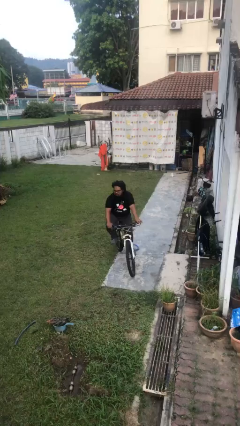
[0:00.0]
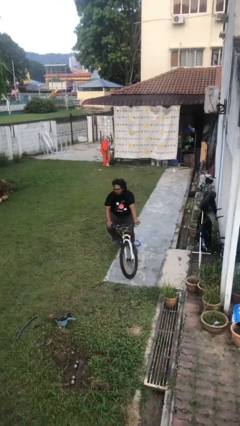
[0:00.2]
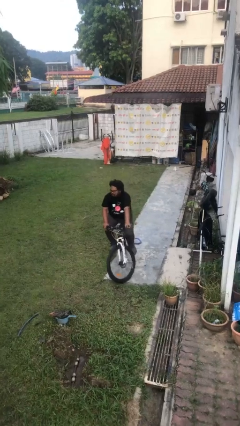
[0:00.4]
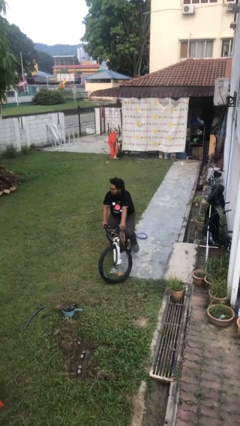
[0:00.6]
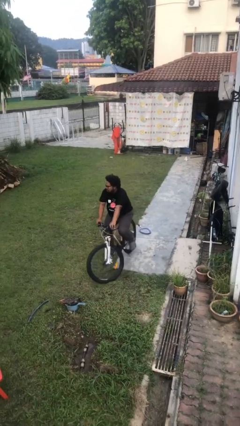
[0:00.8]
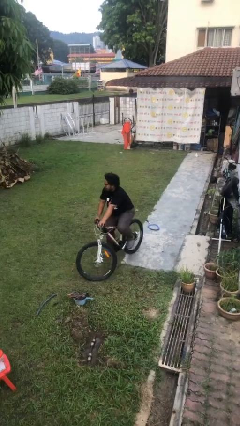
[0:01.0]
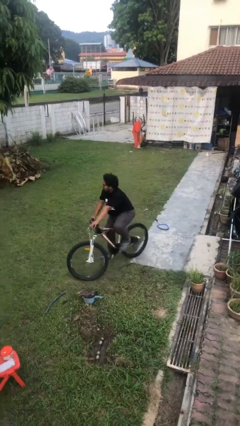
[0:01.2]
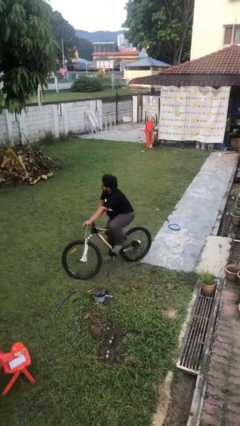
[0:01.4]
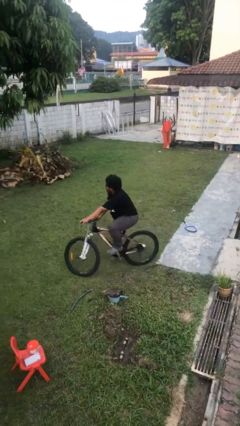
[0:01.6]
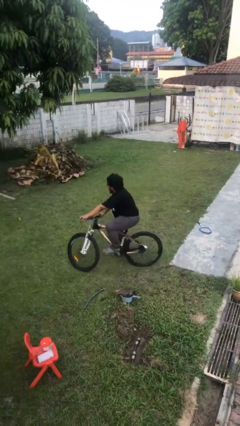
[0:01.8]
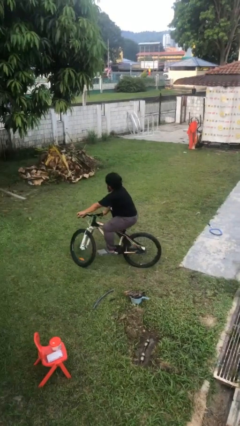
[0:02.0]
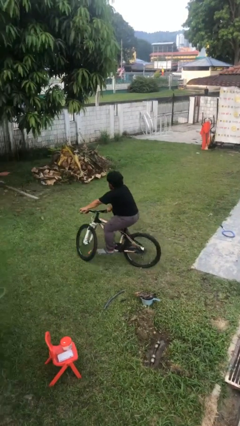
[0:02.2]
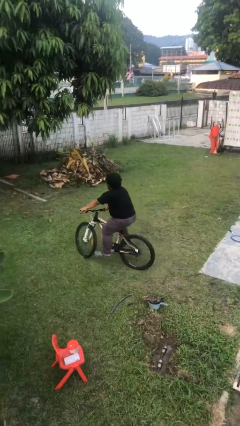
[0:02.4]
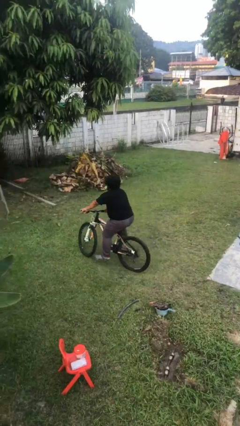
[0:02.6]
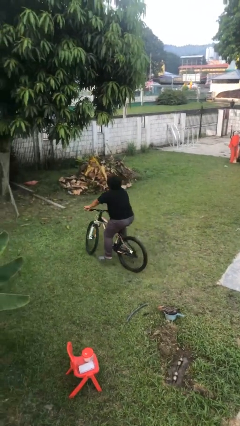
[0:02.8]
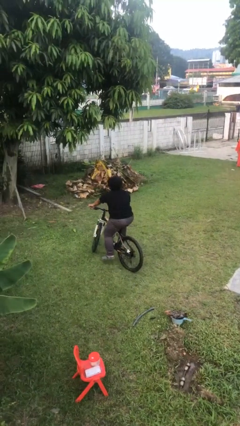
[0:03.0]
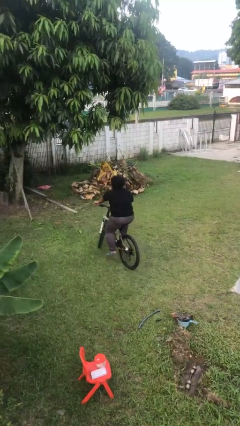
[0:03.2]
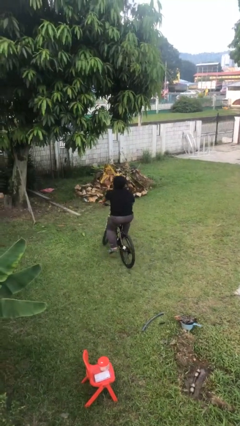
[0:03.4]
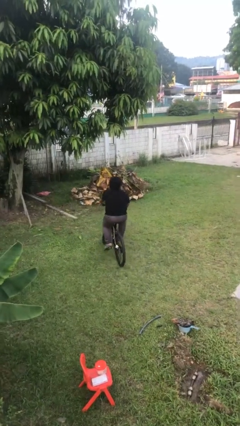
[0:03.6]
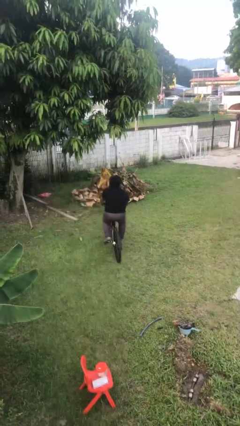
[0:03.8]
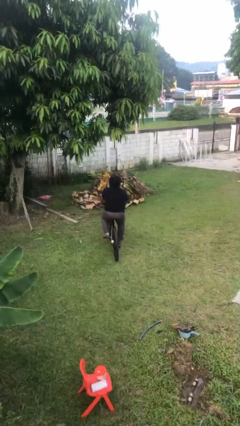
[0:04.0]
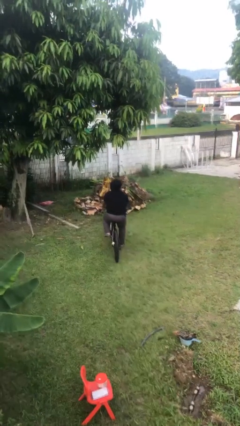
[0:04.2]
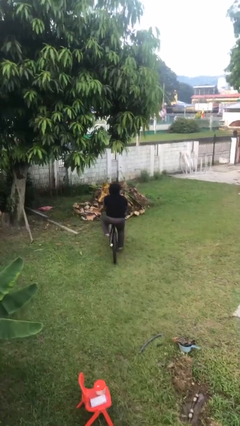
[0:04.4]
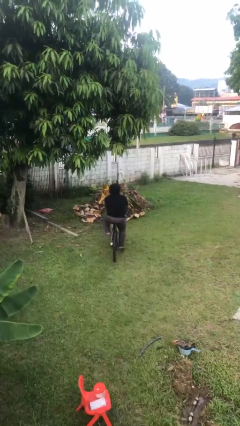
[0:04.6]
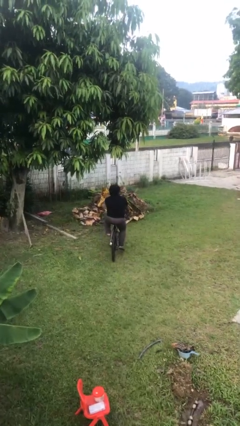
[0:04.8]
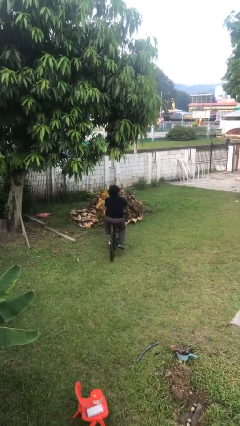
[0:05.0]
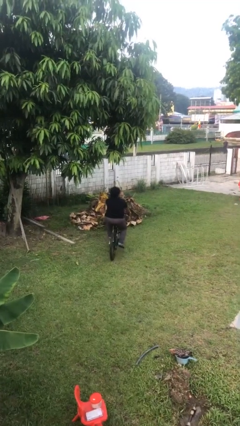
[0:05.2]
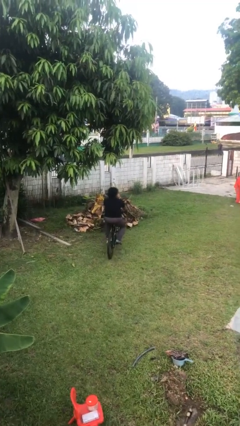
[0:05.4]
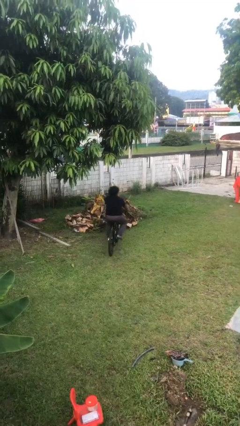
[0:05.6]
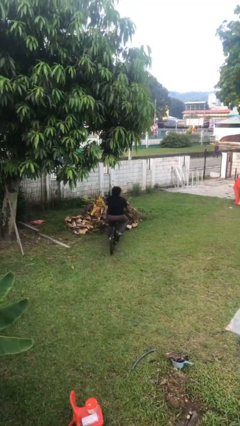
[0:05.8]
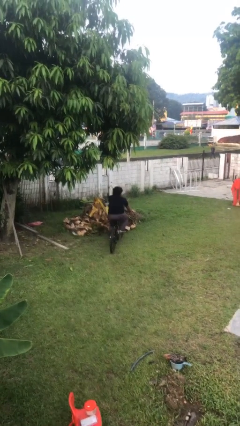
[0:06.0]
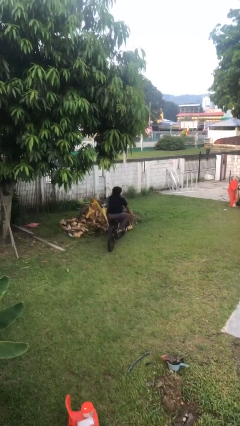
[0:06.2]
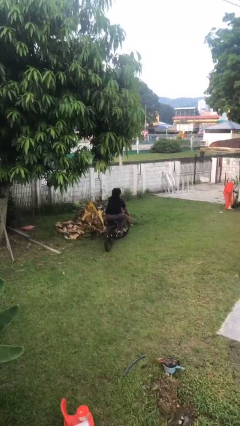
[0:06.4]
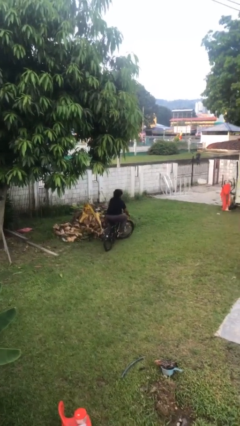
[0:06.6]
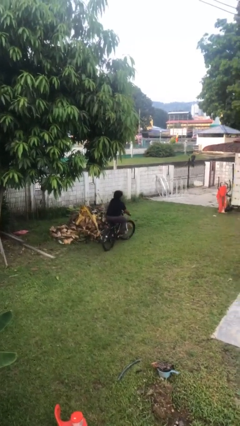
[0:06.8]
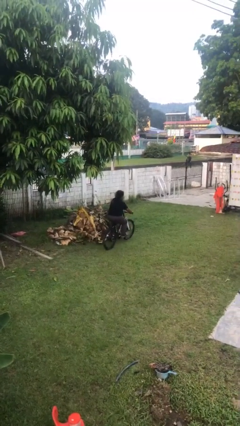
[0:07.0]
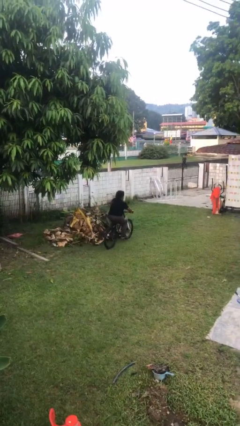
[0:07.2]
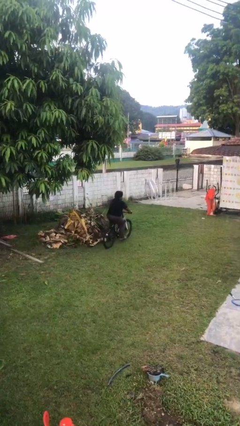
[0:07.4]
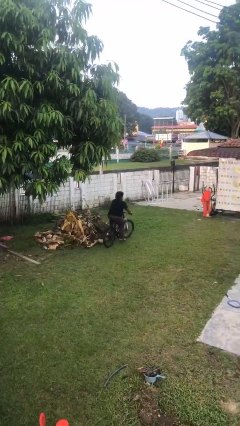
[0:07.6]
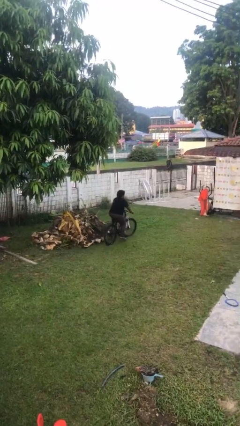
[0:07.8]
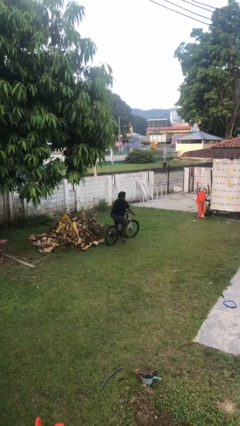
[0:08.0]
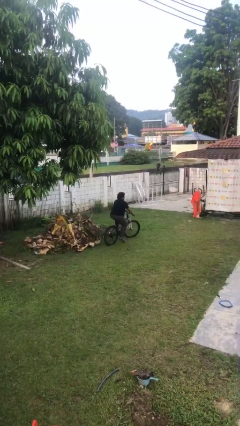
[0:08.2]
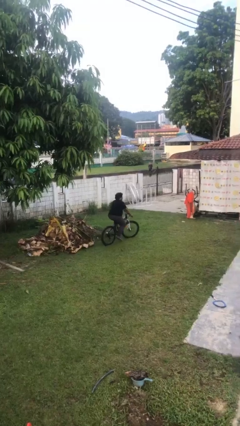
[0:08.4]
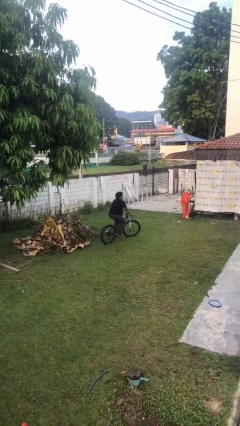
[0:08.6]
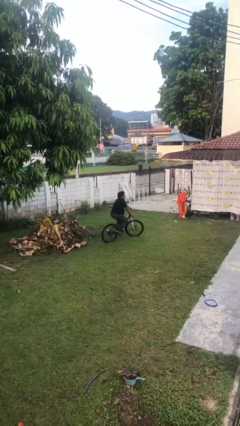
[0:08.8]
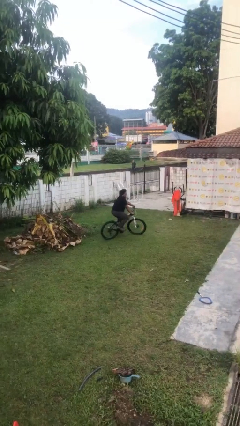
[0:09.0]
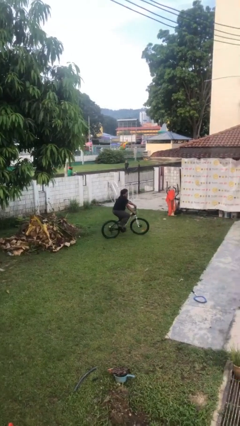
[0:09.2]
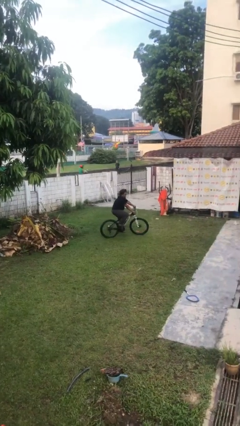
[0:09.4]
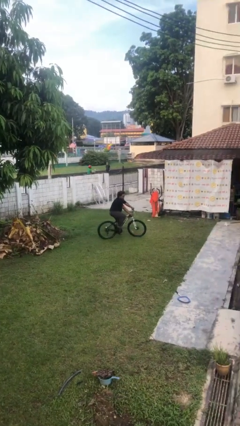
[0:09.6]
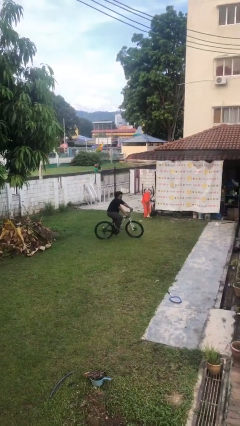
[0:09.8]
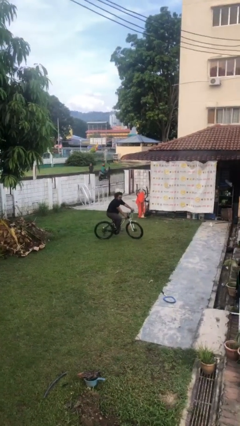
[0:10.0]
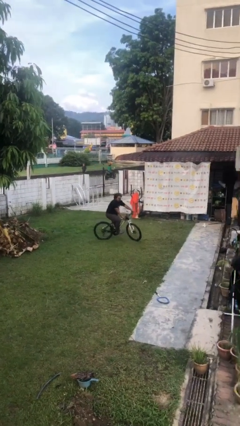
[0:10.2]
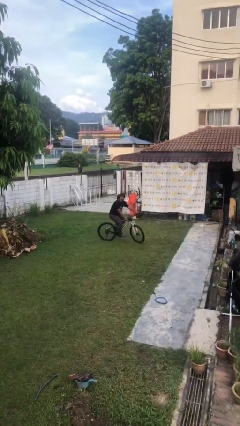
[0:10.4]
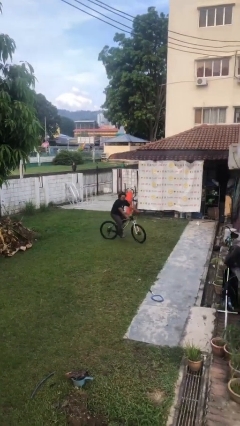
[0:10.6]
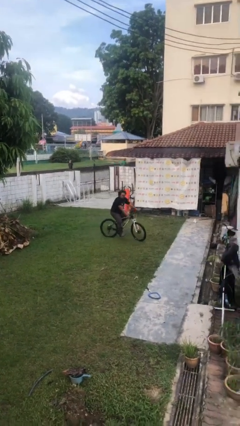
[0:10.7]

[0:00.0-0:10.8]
person rides bicycle

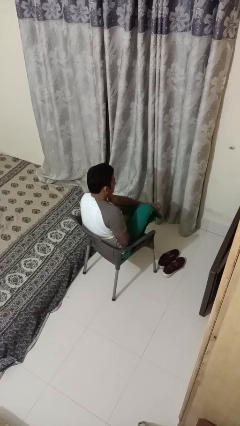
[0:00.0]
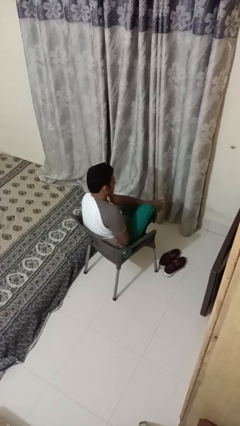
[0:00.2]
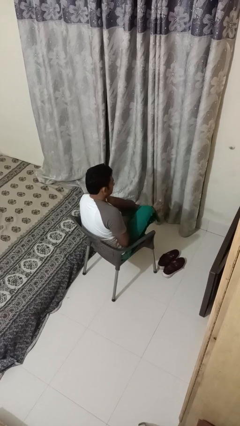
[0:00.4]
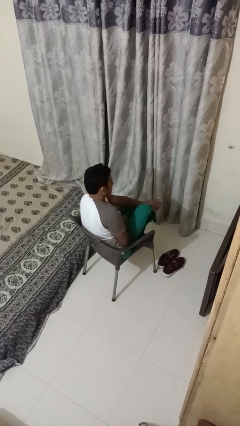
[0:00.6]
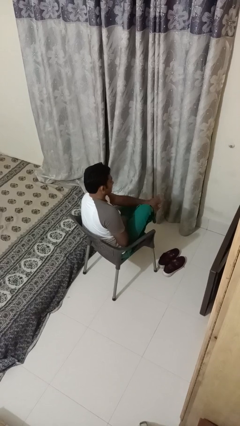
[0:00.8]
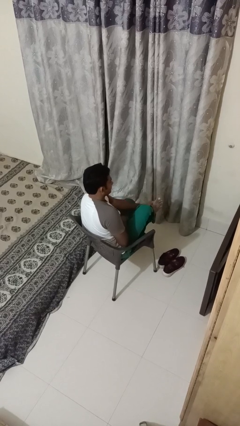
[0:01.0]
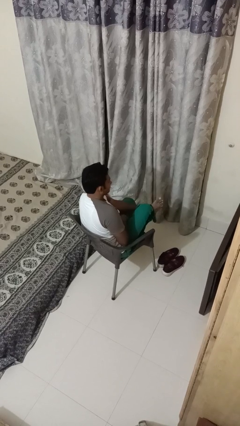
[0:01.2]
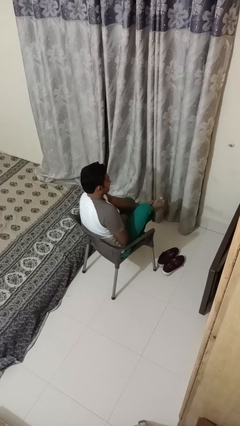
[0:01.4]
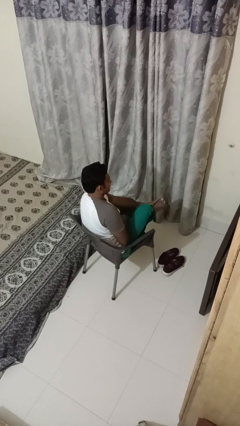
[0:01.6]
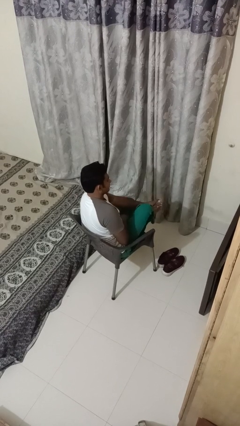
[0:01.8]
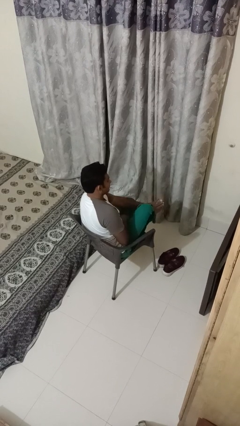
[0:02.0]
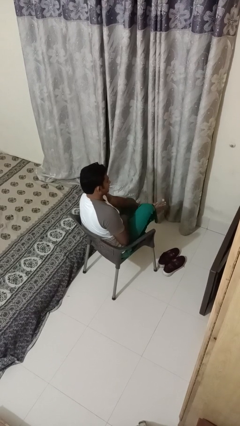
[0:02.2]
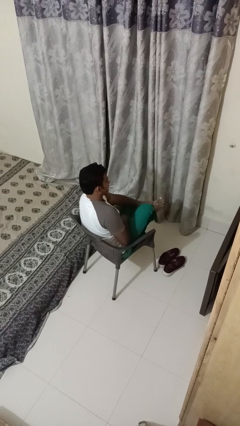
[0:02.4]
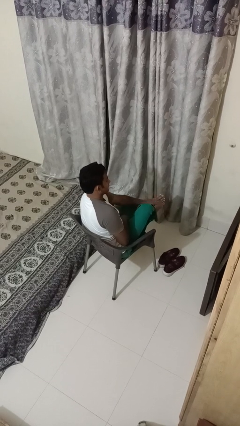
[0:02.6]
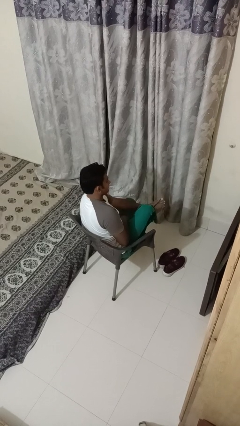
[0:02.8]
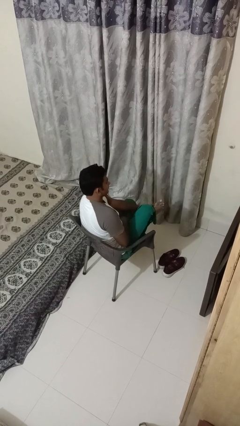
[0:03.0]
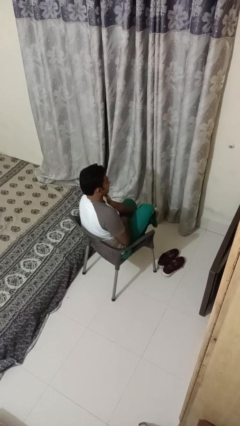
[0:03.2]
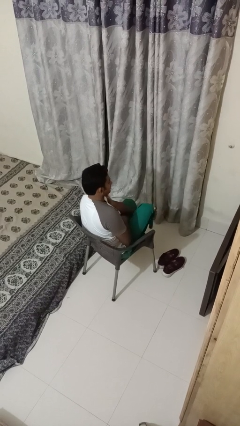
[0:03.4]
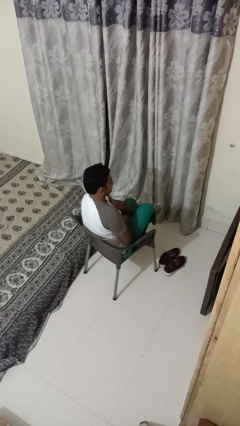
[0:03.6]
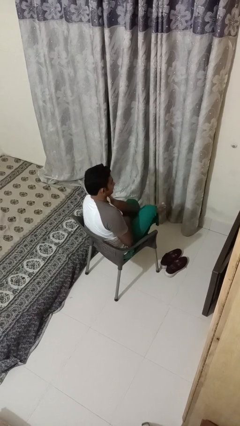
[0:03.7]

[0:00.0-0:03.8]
person rubs foot

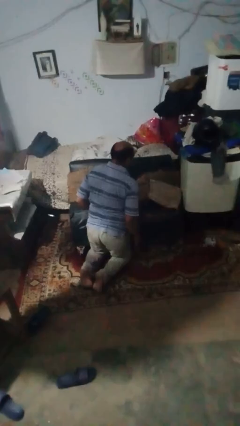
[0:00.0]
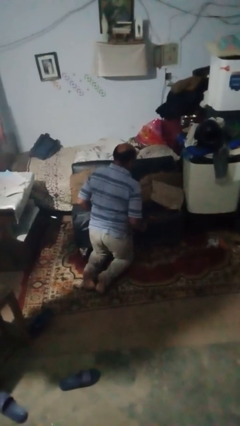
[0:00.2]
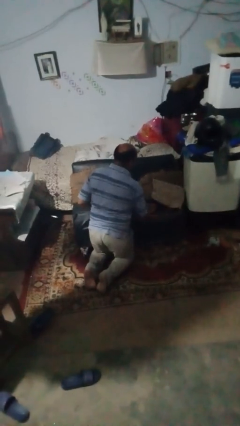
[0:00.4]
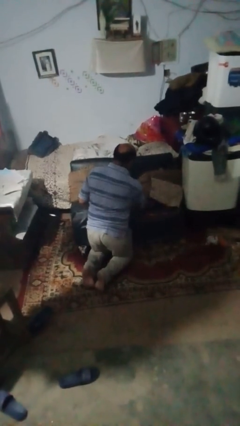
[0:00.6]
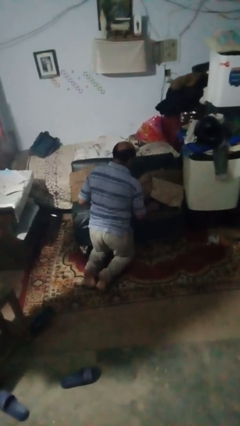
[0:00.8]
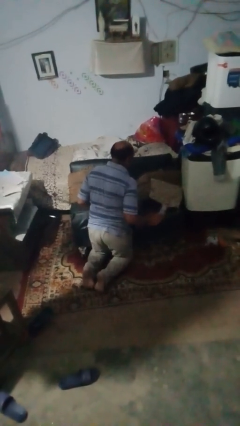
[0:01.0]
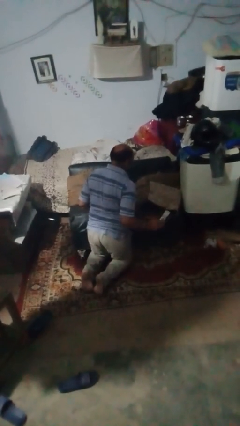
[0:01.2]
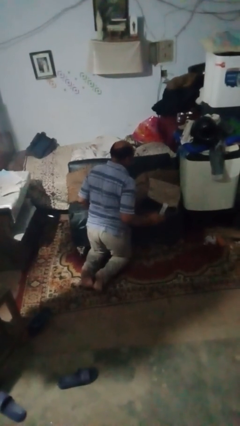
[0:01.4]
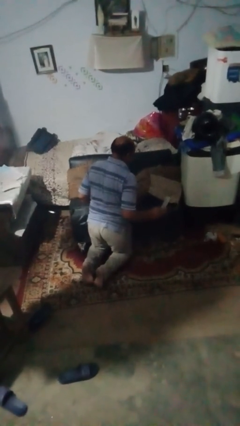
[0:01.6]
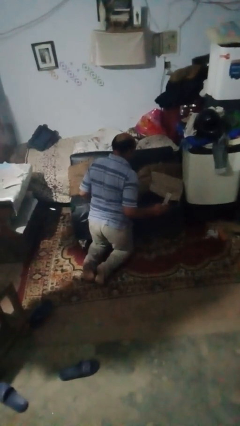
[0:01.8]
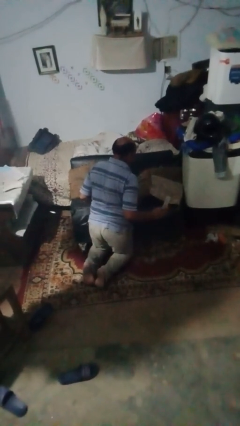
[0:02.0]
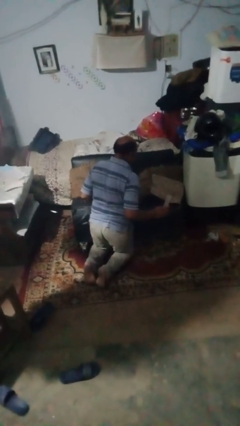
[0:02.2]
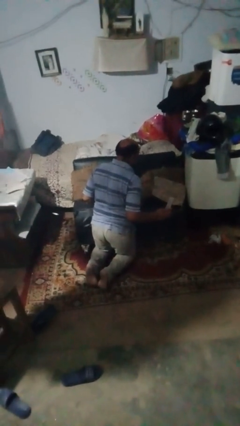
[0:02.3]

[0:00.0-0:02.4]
person searches in couch

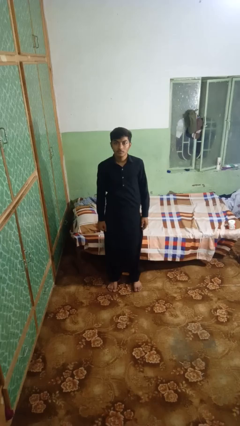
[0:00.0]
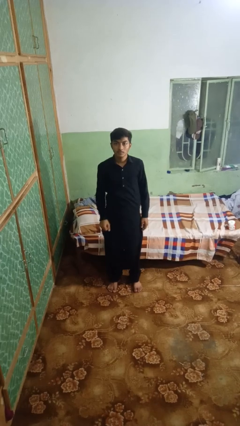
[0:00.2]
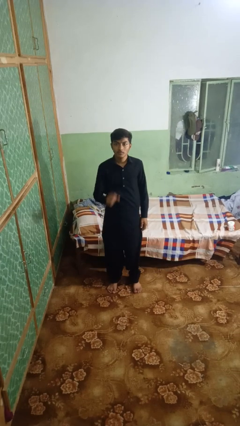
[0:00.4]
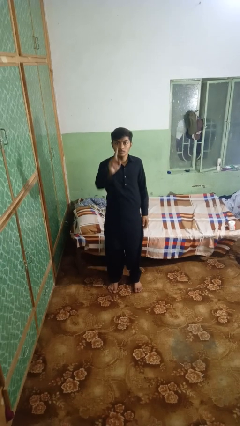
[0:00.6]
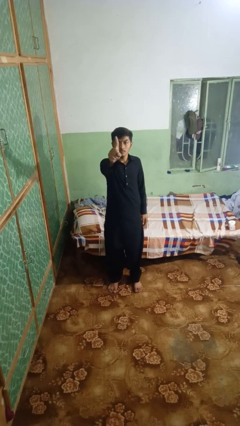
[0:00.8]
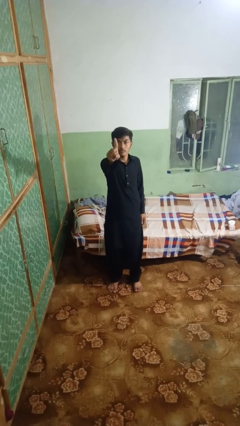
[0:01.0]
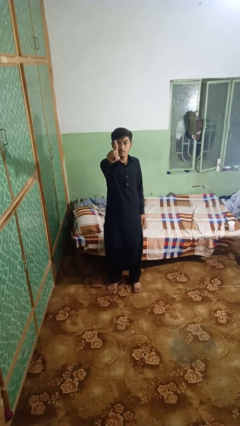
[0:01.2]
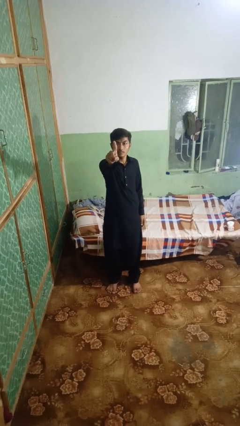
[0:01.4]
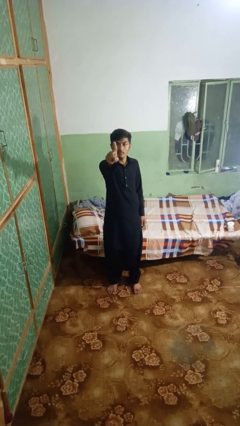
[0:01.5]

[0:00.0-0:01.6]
person gestures number one
